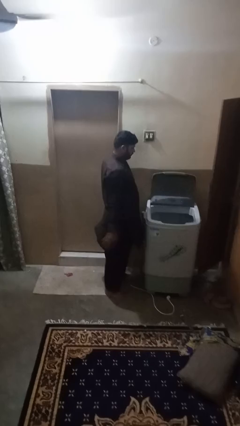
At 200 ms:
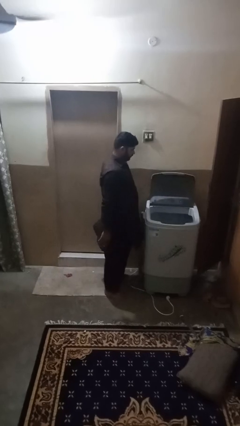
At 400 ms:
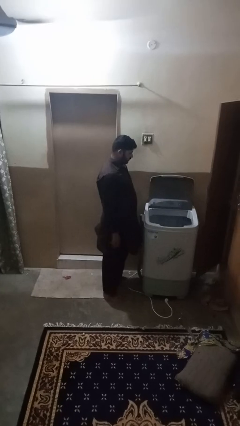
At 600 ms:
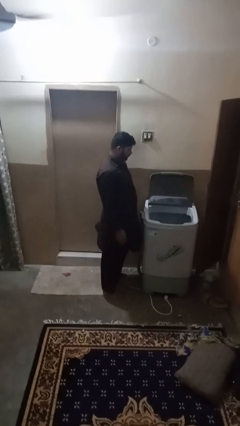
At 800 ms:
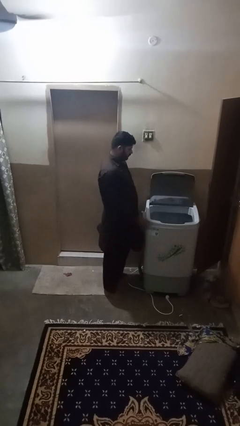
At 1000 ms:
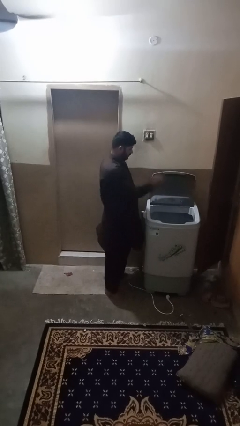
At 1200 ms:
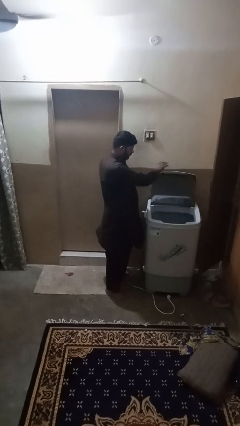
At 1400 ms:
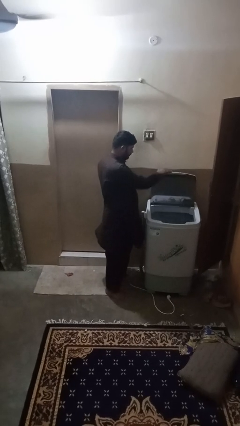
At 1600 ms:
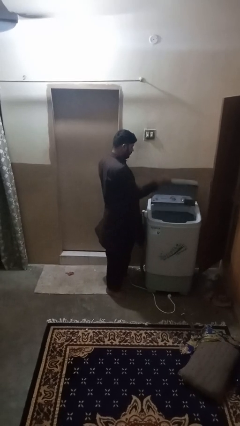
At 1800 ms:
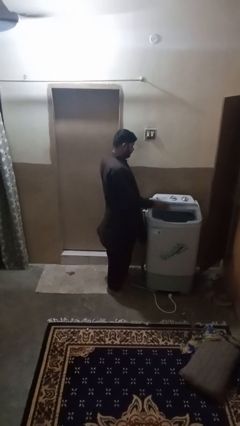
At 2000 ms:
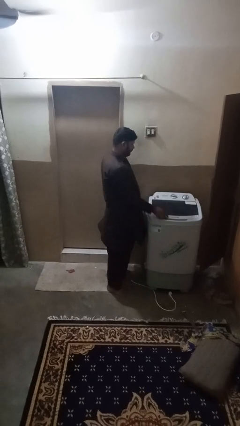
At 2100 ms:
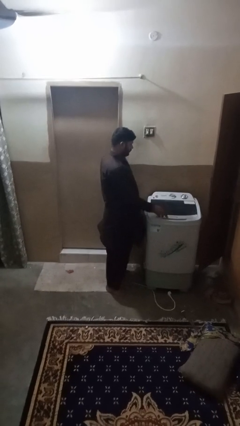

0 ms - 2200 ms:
person closes clothes washer

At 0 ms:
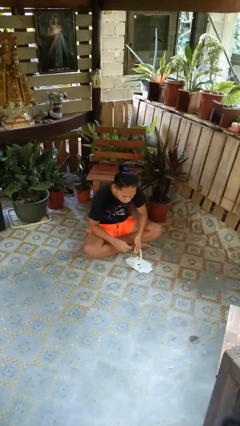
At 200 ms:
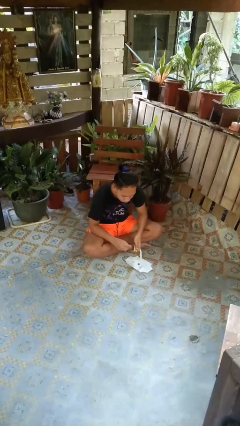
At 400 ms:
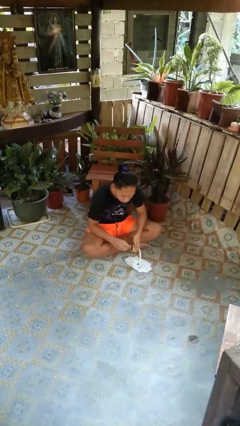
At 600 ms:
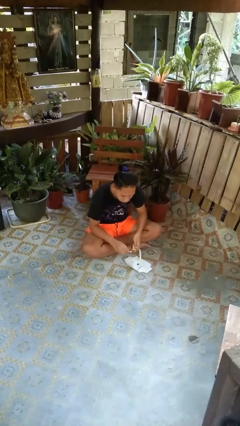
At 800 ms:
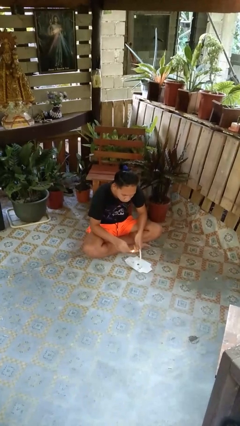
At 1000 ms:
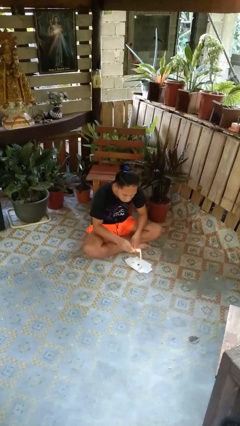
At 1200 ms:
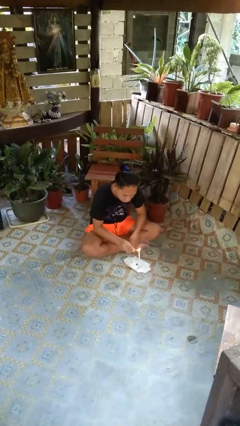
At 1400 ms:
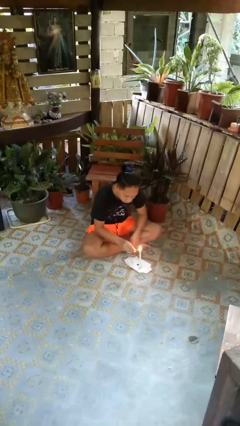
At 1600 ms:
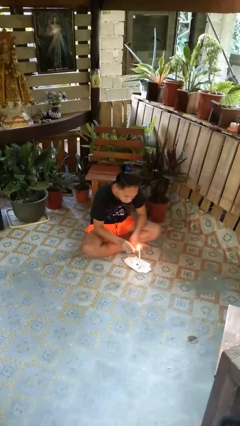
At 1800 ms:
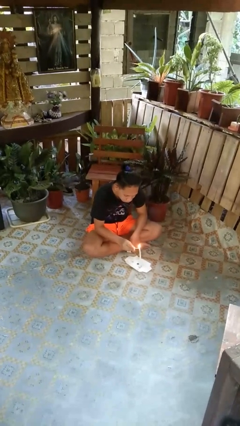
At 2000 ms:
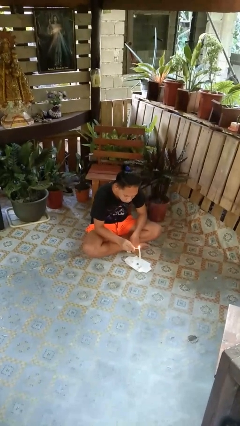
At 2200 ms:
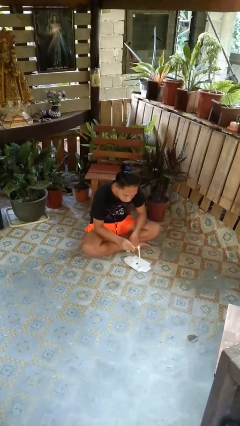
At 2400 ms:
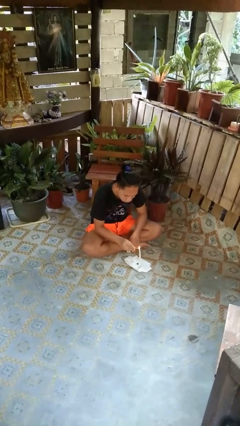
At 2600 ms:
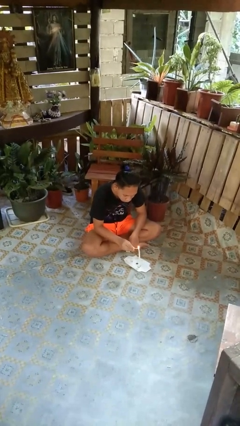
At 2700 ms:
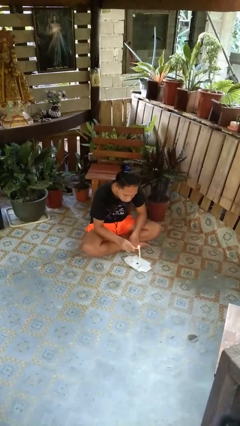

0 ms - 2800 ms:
person lights candle

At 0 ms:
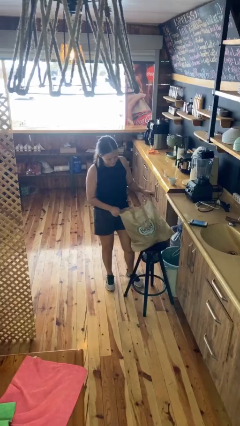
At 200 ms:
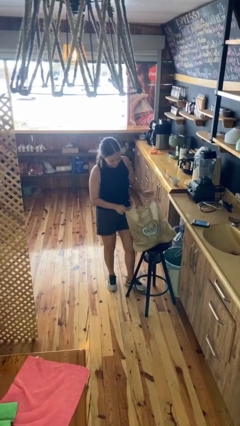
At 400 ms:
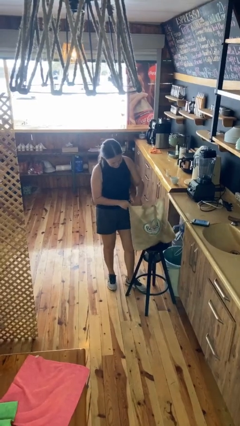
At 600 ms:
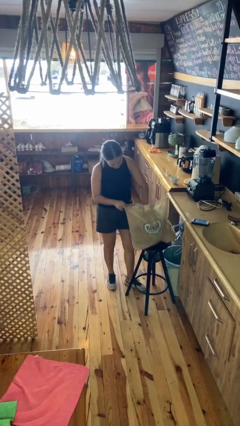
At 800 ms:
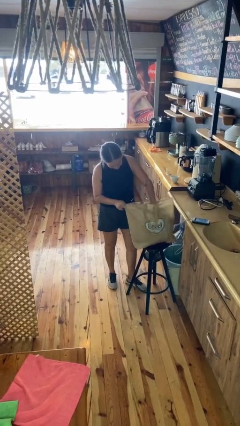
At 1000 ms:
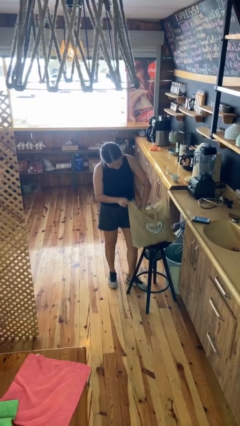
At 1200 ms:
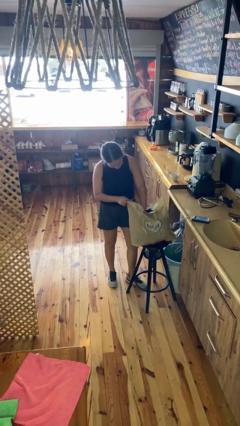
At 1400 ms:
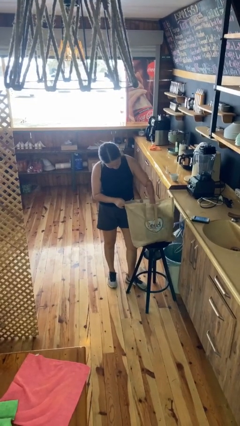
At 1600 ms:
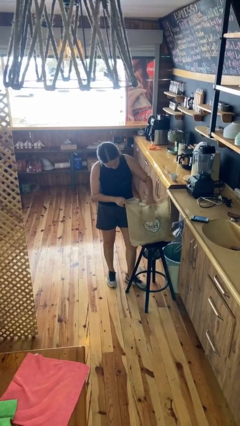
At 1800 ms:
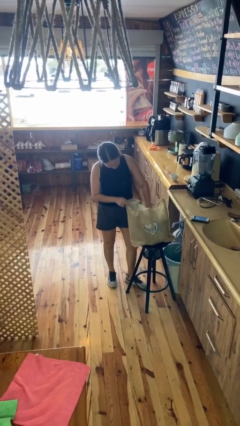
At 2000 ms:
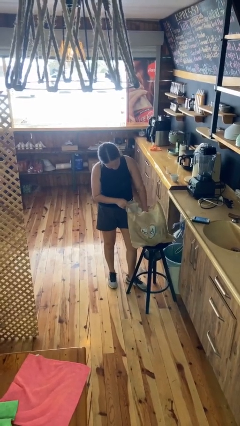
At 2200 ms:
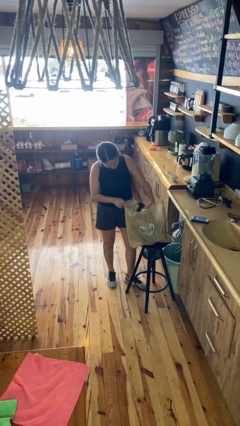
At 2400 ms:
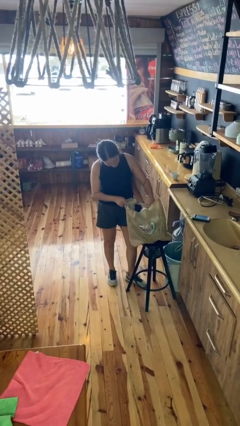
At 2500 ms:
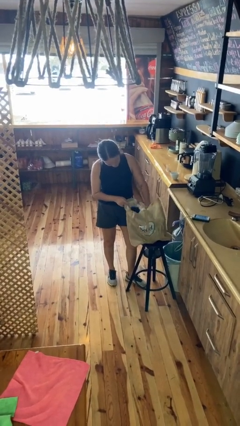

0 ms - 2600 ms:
person searches in bag

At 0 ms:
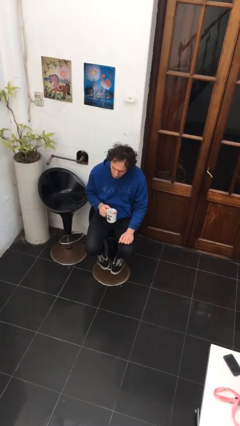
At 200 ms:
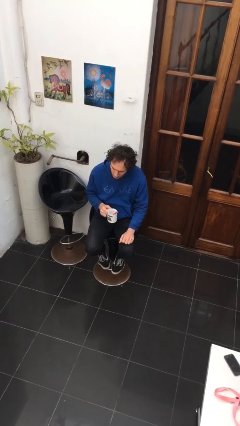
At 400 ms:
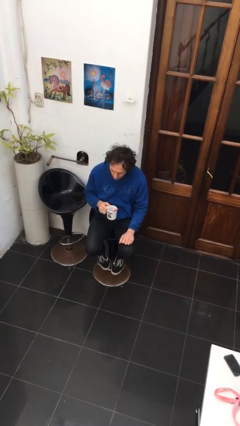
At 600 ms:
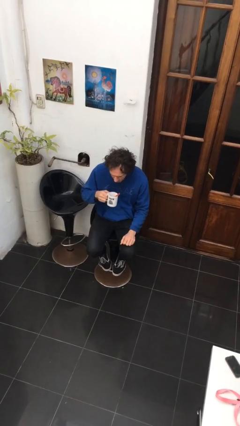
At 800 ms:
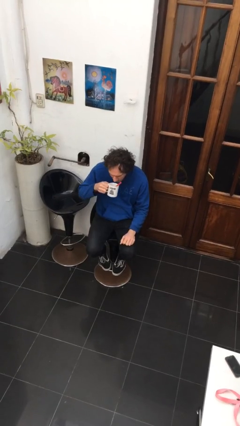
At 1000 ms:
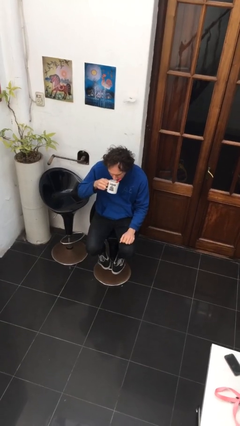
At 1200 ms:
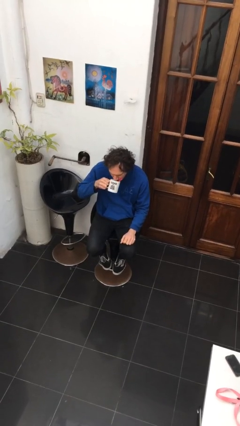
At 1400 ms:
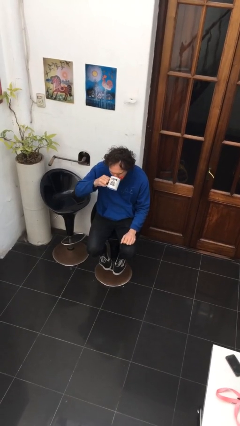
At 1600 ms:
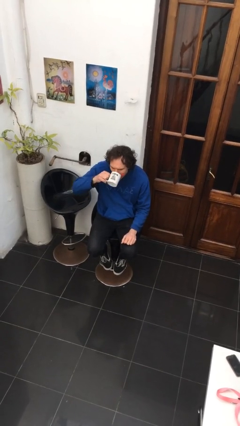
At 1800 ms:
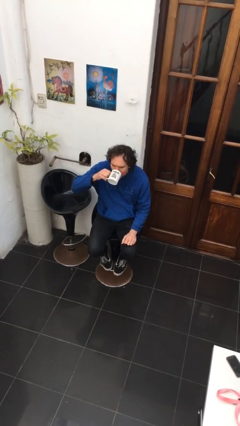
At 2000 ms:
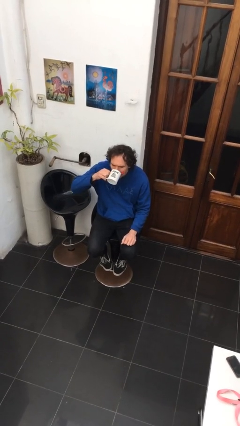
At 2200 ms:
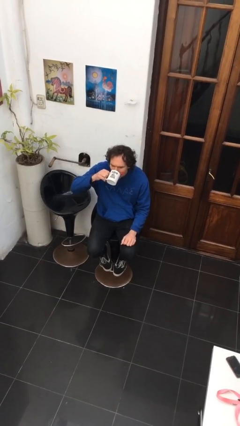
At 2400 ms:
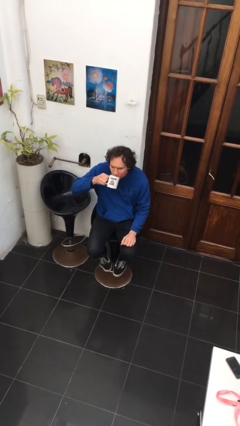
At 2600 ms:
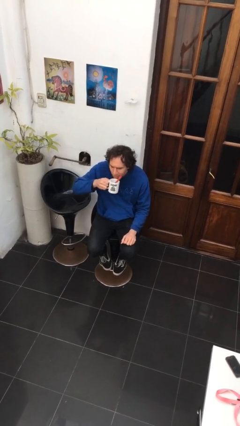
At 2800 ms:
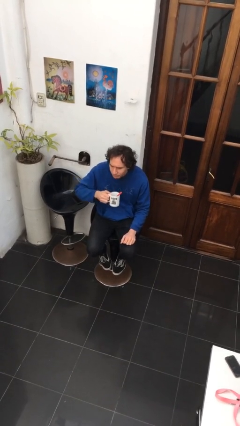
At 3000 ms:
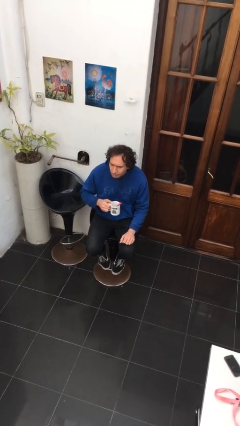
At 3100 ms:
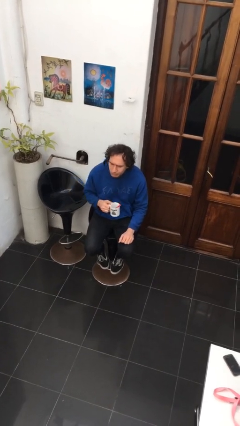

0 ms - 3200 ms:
person drinks from mug

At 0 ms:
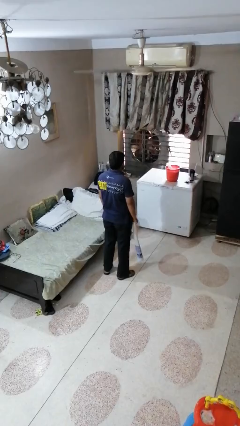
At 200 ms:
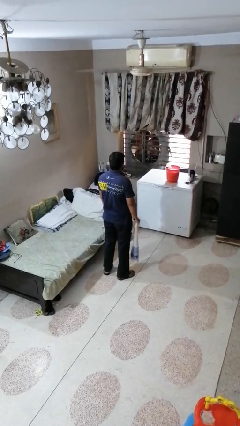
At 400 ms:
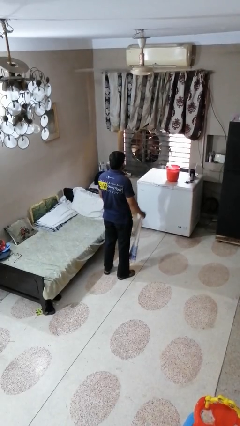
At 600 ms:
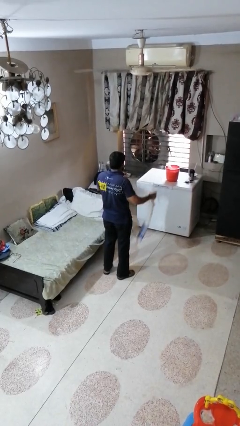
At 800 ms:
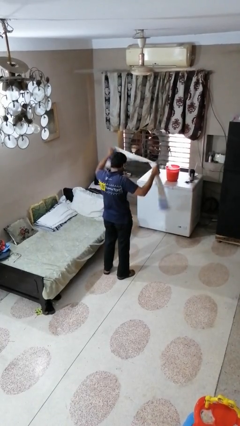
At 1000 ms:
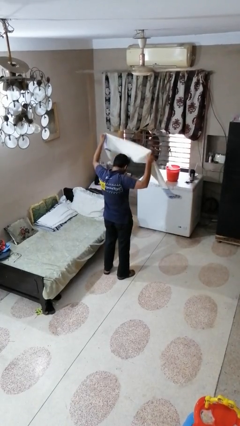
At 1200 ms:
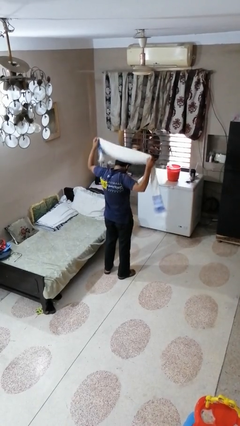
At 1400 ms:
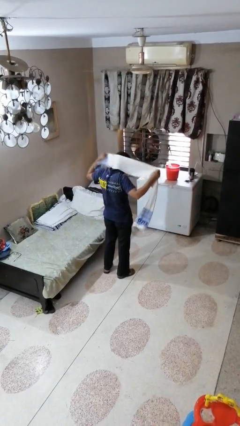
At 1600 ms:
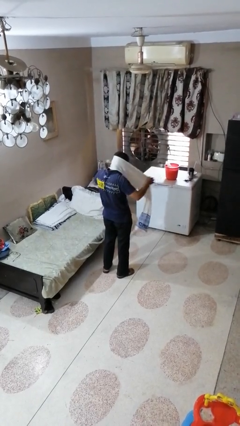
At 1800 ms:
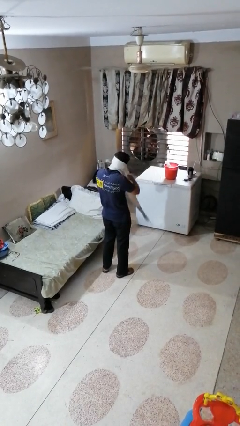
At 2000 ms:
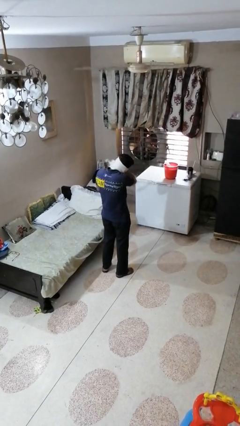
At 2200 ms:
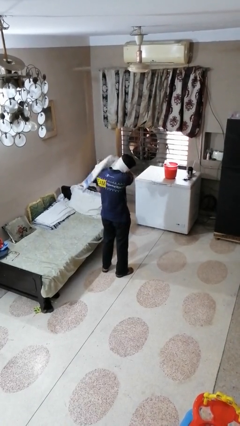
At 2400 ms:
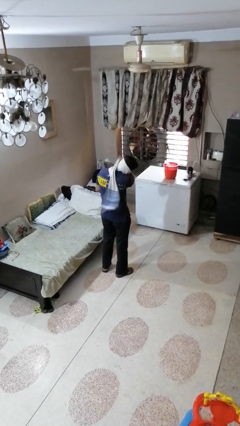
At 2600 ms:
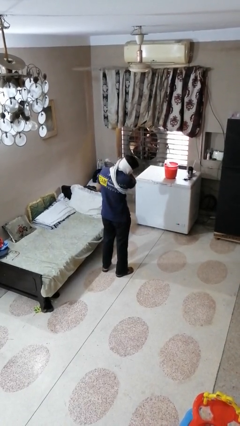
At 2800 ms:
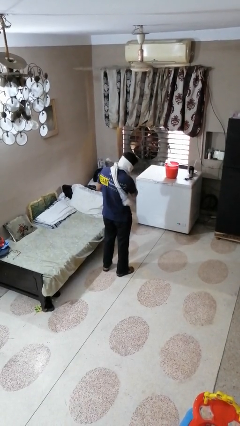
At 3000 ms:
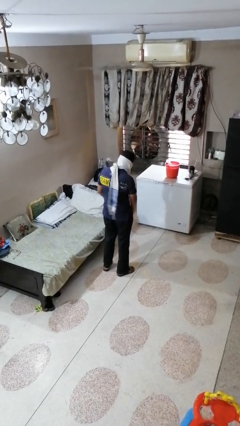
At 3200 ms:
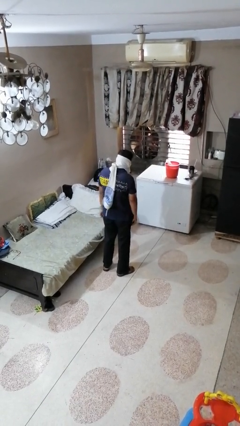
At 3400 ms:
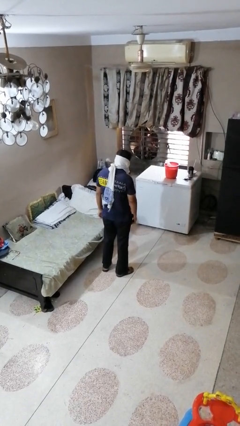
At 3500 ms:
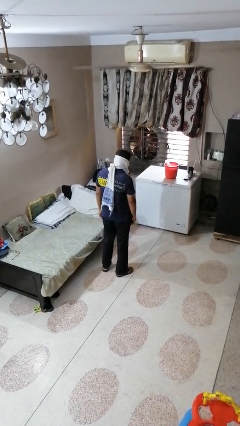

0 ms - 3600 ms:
person puts on scarf

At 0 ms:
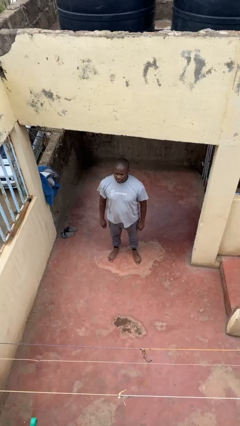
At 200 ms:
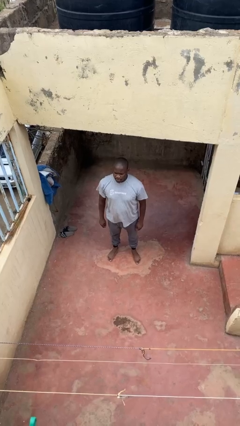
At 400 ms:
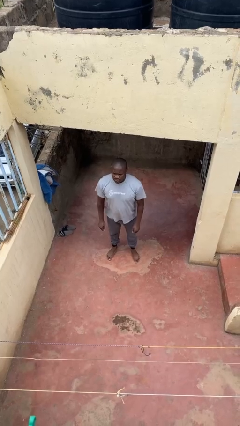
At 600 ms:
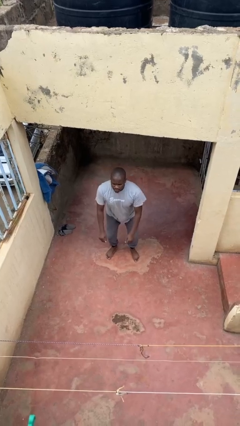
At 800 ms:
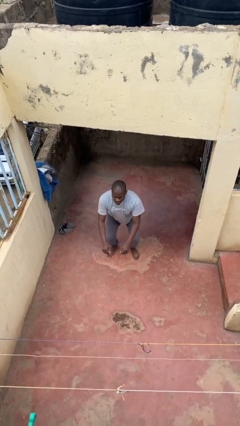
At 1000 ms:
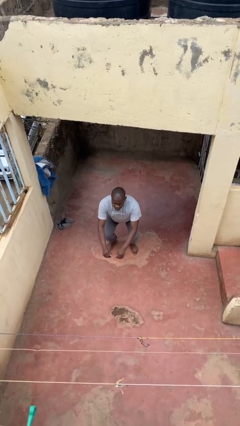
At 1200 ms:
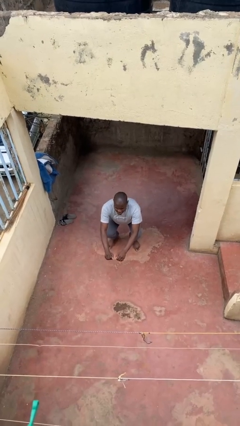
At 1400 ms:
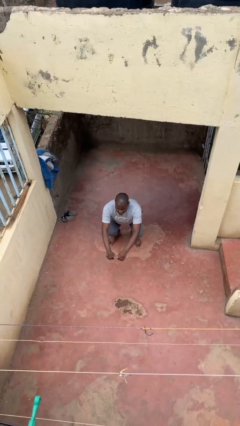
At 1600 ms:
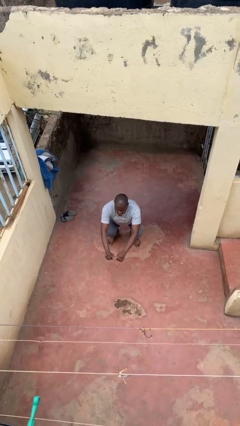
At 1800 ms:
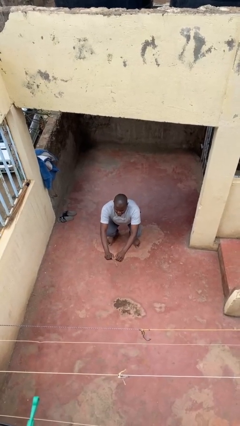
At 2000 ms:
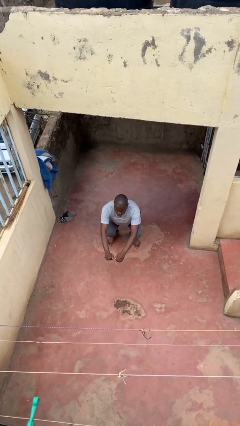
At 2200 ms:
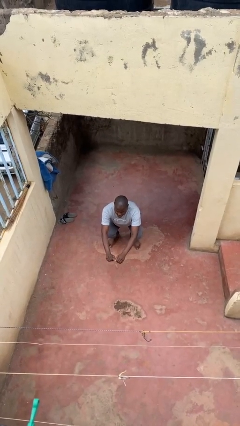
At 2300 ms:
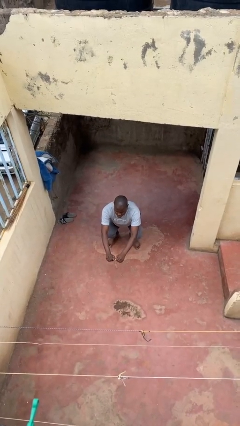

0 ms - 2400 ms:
person squats

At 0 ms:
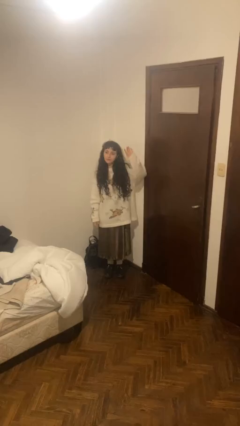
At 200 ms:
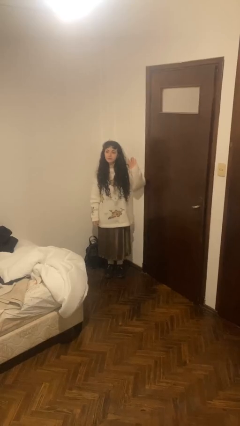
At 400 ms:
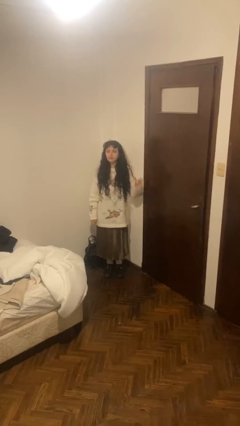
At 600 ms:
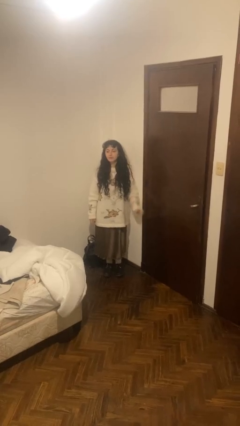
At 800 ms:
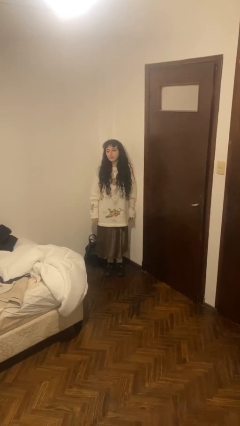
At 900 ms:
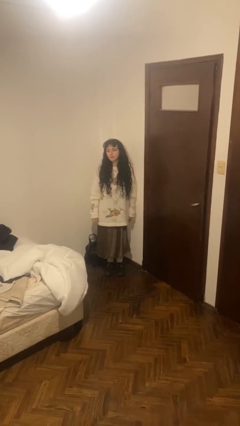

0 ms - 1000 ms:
person gestures lower hand
